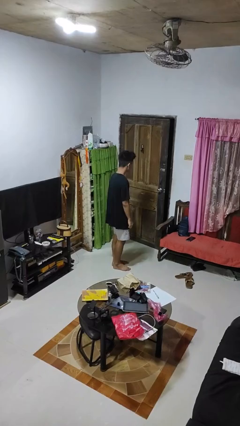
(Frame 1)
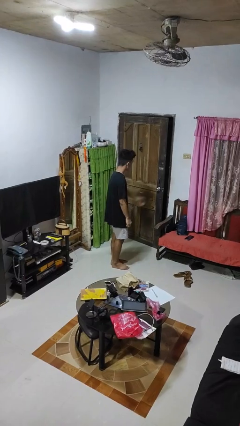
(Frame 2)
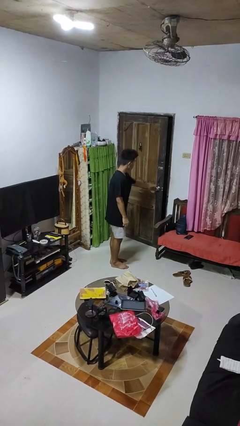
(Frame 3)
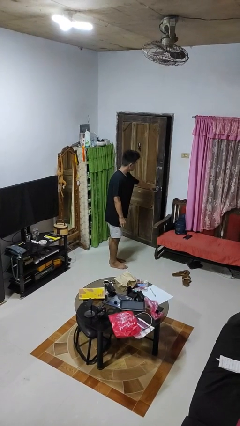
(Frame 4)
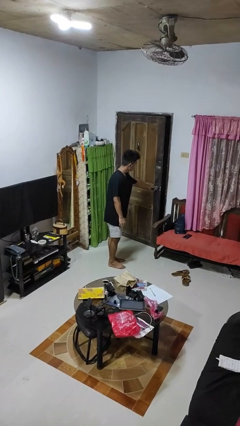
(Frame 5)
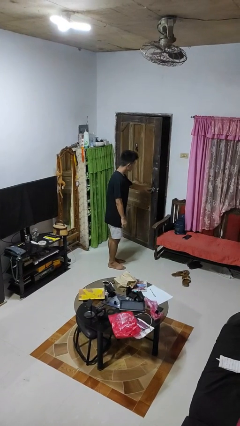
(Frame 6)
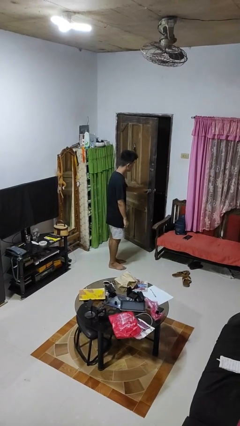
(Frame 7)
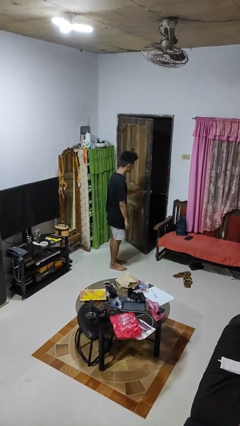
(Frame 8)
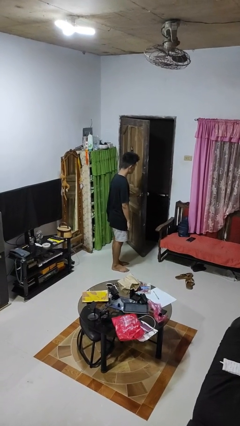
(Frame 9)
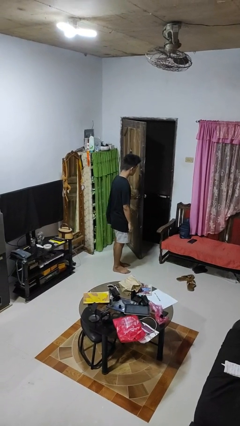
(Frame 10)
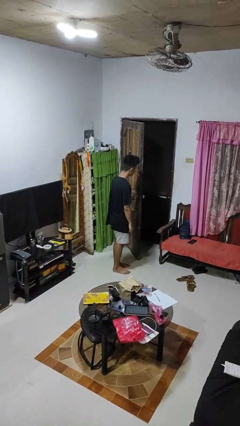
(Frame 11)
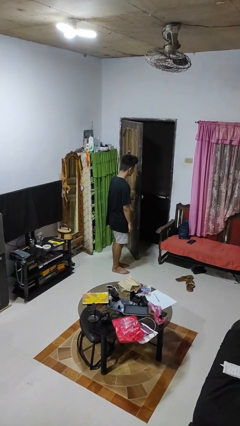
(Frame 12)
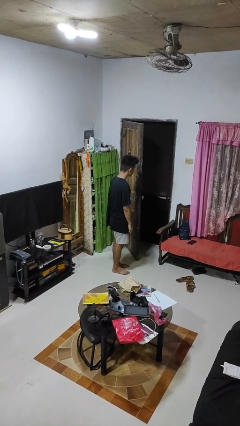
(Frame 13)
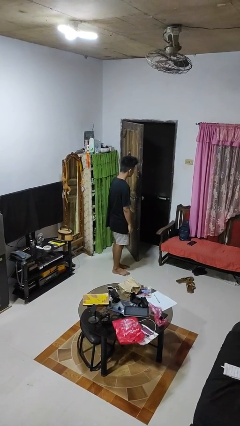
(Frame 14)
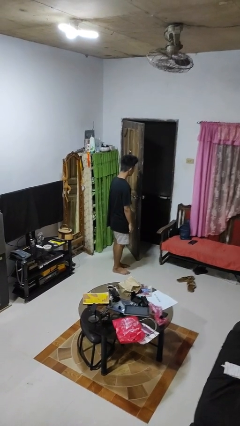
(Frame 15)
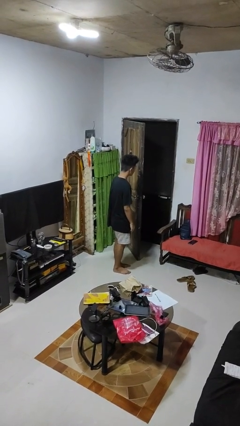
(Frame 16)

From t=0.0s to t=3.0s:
person opens facility door

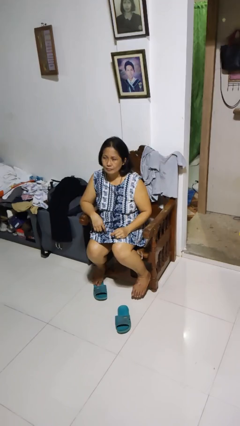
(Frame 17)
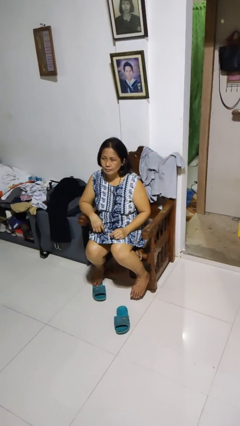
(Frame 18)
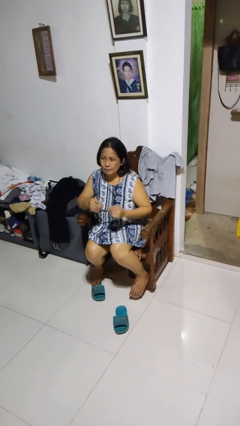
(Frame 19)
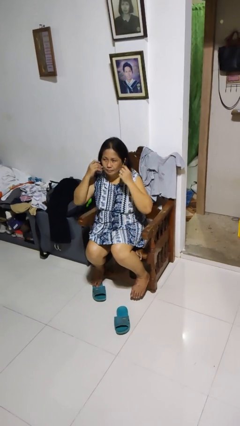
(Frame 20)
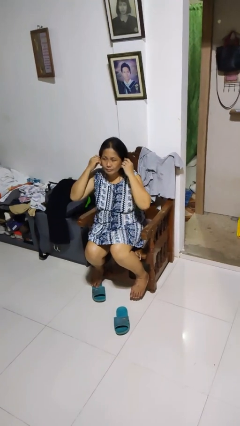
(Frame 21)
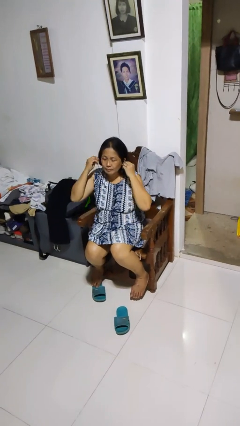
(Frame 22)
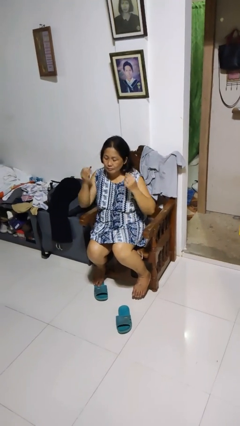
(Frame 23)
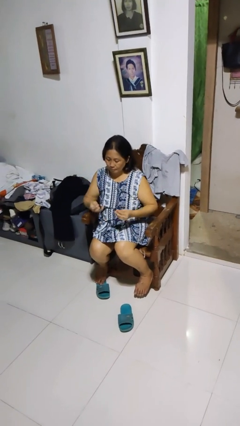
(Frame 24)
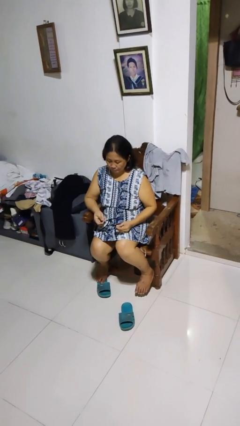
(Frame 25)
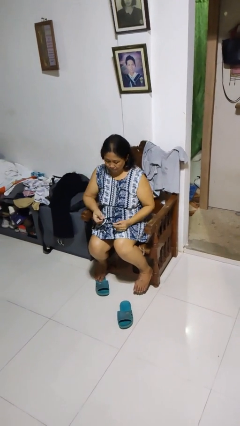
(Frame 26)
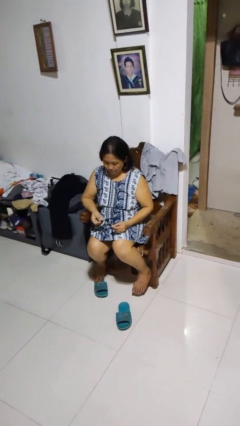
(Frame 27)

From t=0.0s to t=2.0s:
person takes off headphones

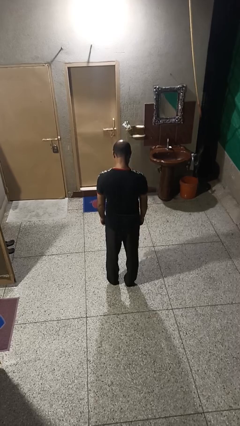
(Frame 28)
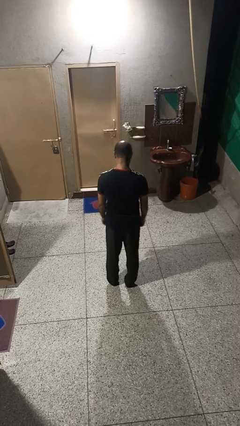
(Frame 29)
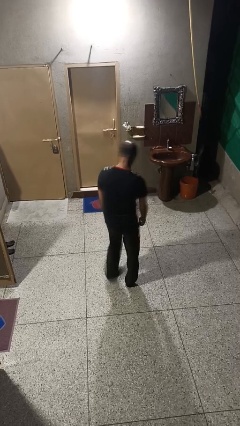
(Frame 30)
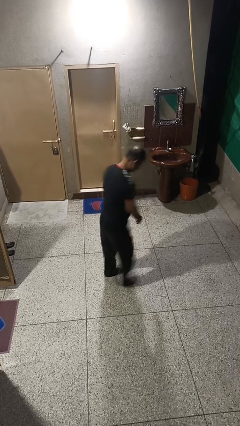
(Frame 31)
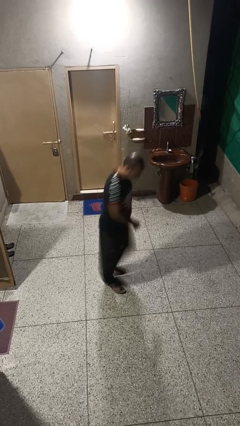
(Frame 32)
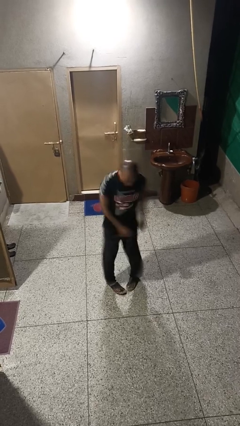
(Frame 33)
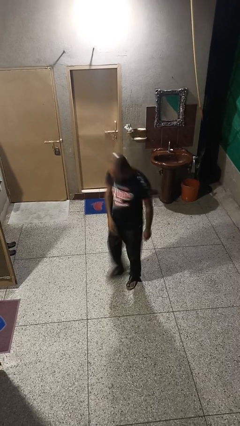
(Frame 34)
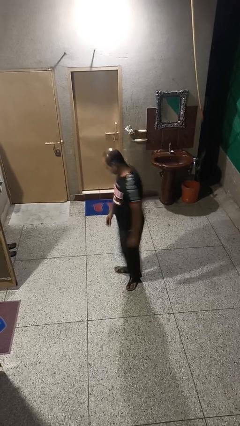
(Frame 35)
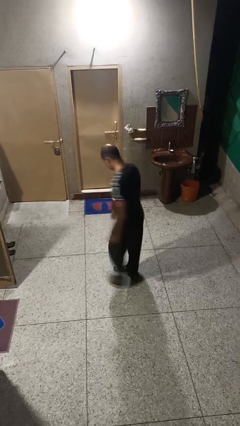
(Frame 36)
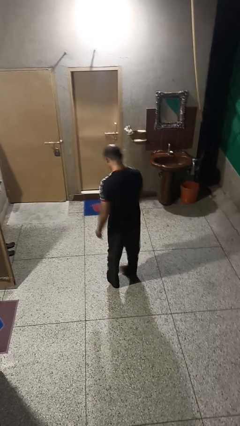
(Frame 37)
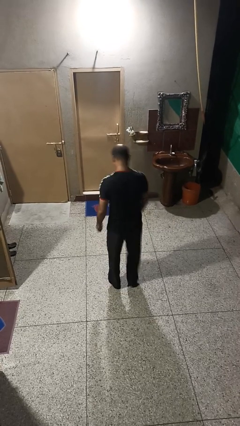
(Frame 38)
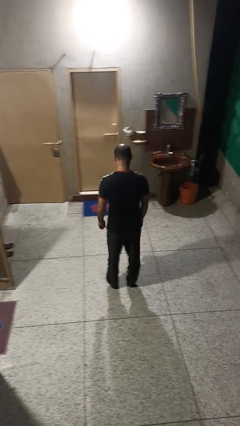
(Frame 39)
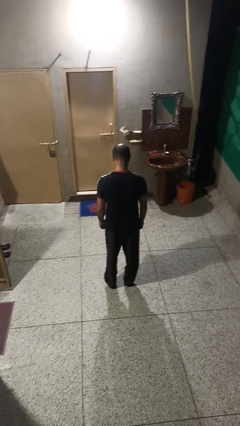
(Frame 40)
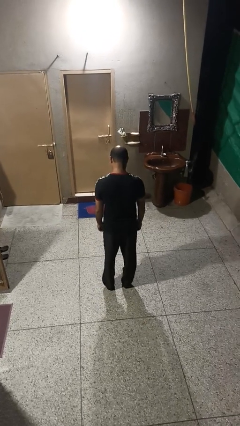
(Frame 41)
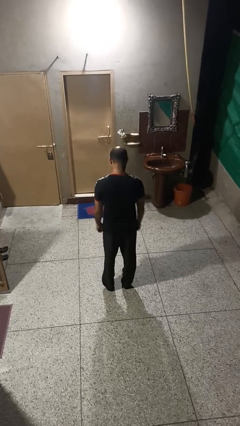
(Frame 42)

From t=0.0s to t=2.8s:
person twirls

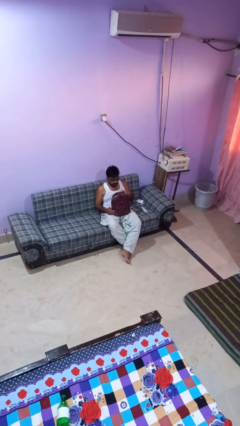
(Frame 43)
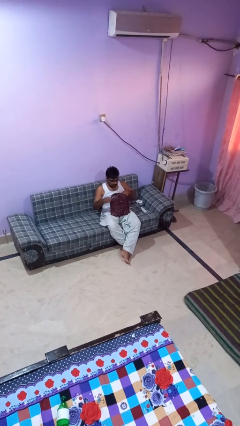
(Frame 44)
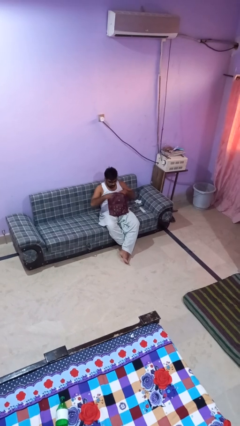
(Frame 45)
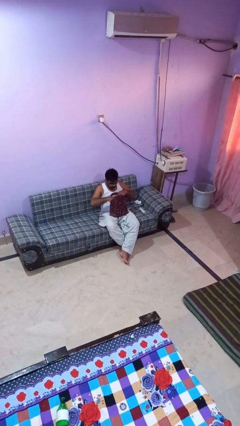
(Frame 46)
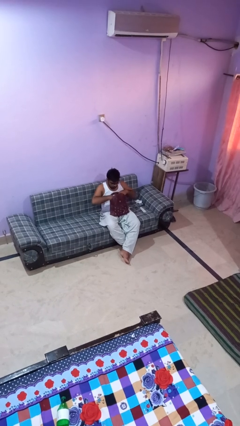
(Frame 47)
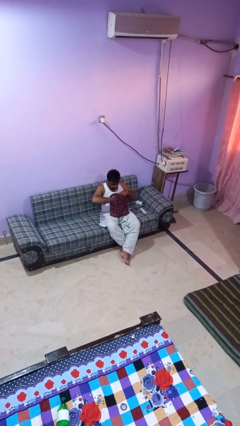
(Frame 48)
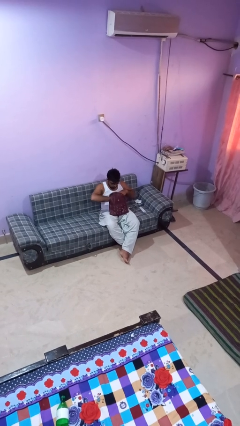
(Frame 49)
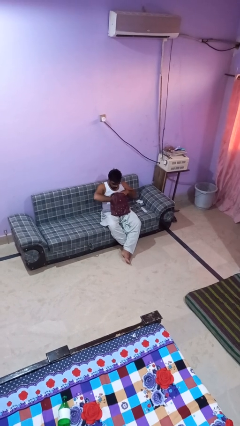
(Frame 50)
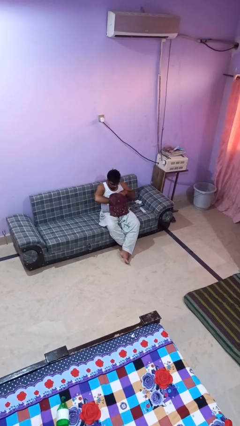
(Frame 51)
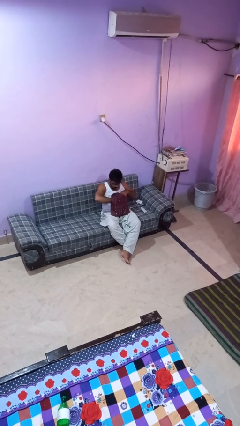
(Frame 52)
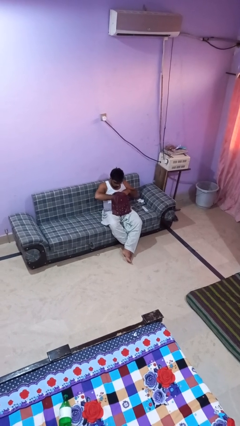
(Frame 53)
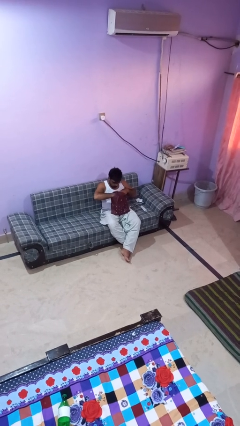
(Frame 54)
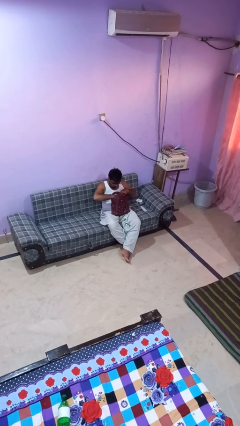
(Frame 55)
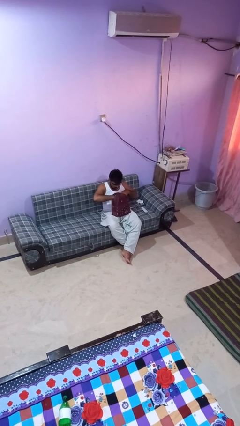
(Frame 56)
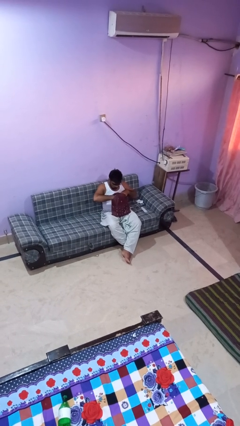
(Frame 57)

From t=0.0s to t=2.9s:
person searches in backpack

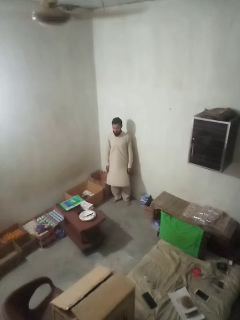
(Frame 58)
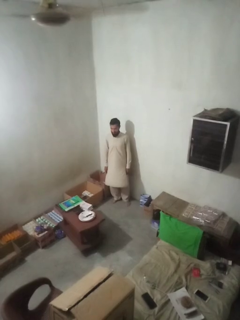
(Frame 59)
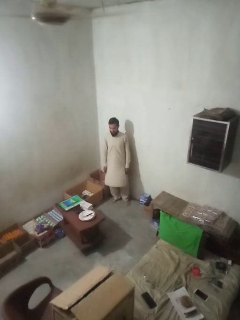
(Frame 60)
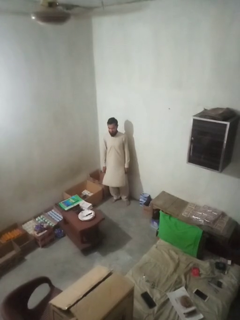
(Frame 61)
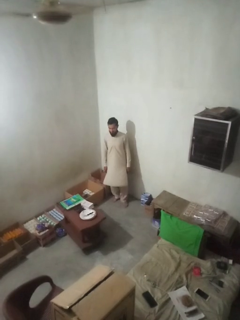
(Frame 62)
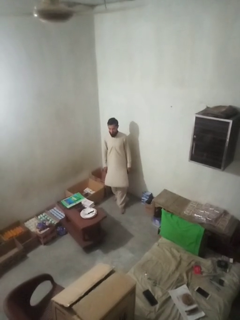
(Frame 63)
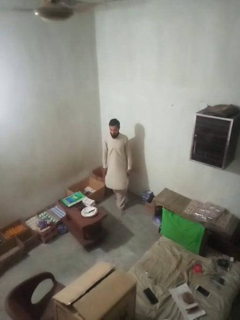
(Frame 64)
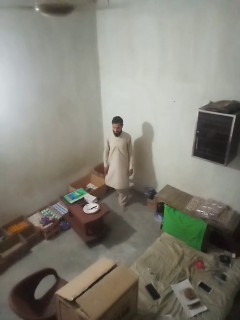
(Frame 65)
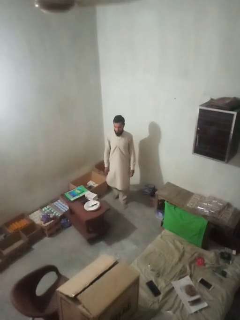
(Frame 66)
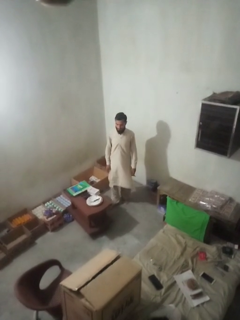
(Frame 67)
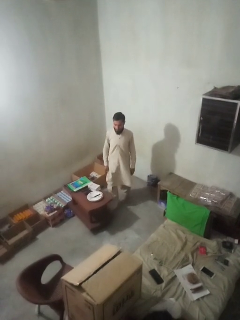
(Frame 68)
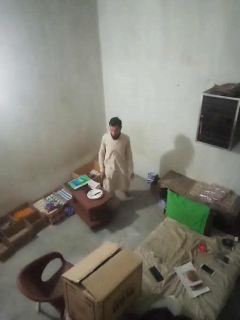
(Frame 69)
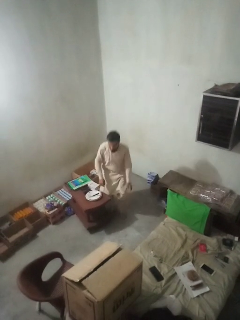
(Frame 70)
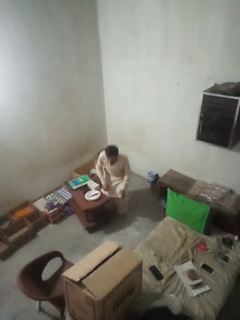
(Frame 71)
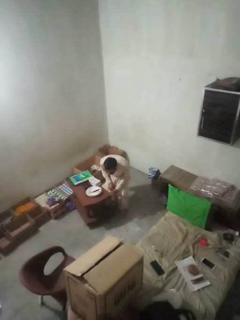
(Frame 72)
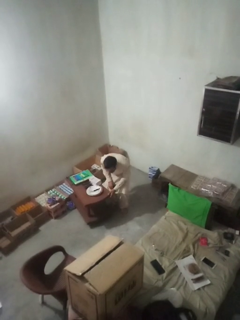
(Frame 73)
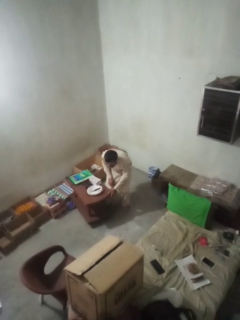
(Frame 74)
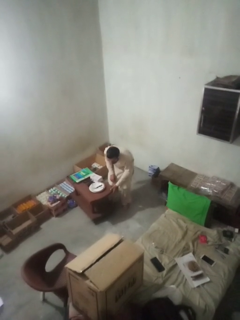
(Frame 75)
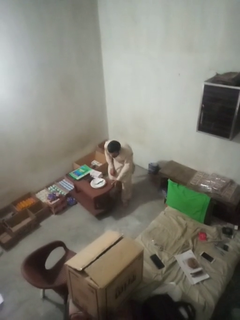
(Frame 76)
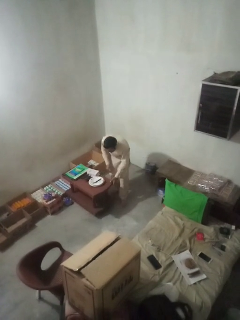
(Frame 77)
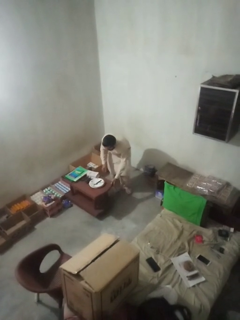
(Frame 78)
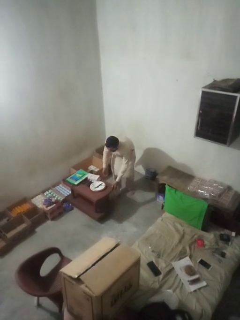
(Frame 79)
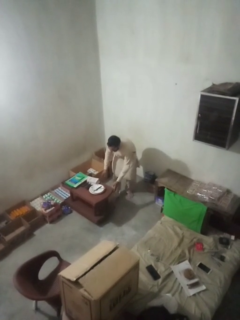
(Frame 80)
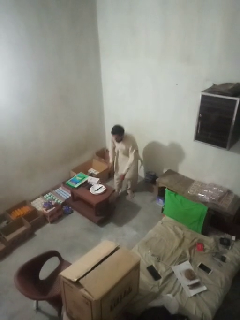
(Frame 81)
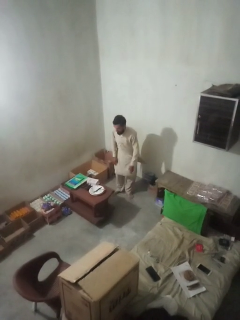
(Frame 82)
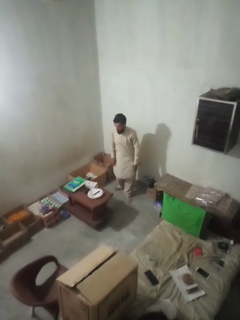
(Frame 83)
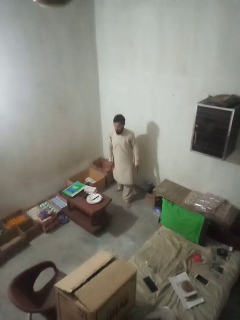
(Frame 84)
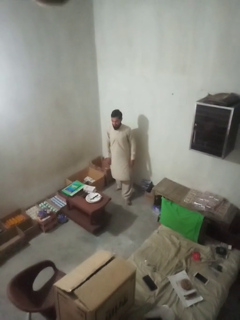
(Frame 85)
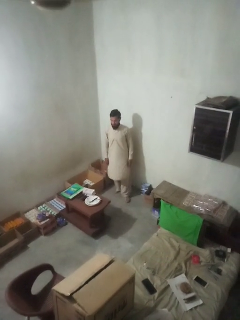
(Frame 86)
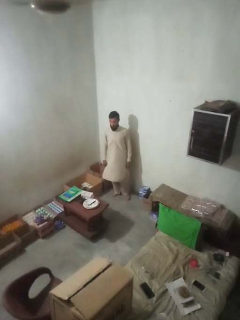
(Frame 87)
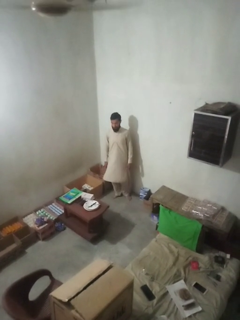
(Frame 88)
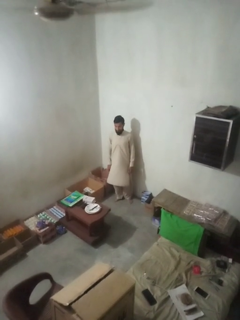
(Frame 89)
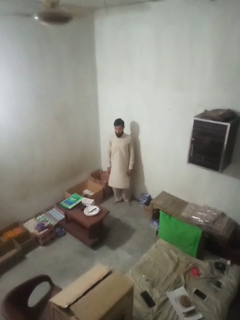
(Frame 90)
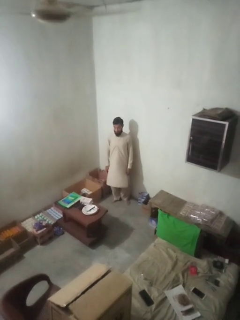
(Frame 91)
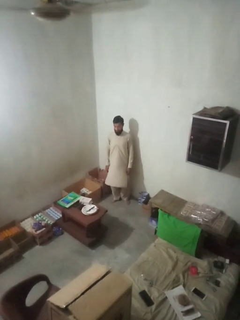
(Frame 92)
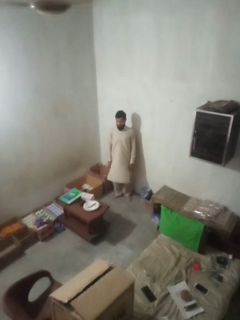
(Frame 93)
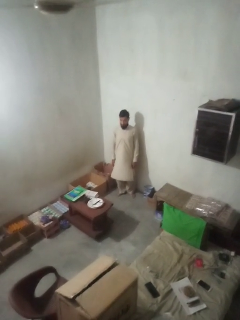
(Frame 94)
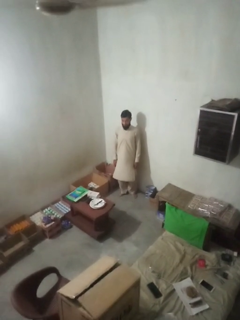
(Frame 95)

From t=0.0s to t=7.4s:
person bumps into table

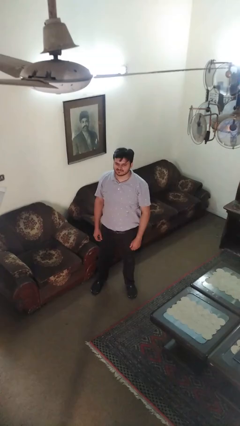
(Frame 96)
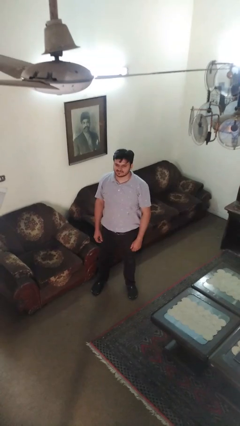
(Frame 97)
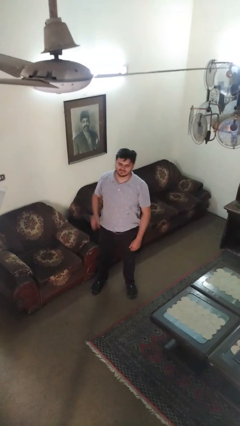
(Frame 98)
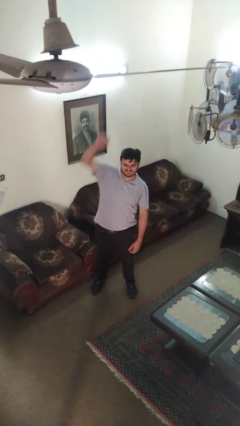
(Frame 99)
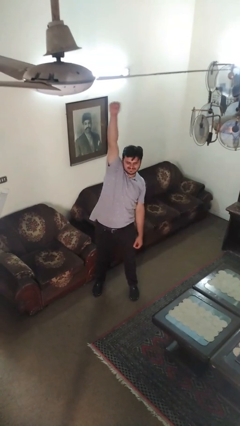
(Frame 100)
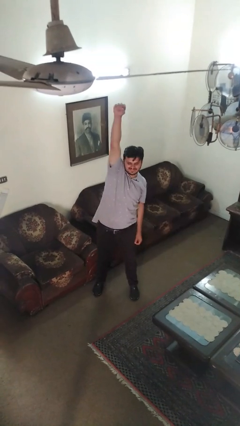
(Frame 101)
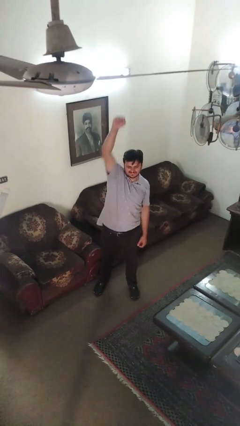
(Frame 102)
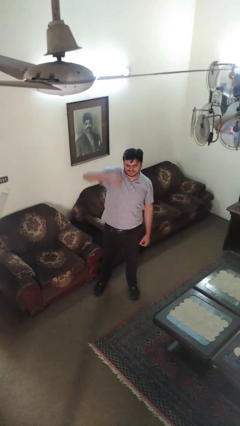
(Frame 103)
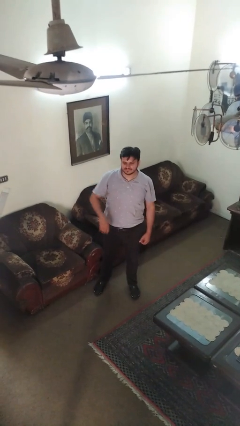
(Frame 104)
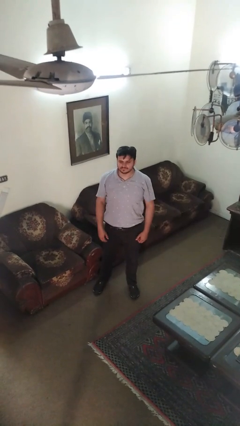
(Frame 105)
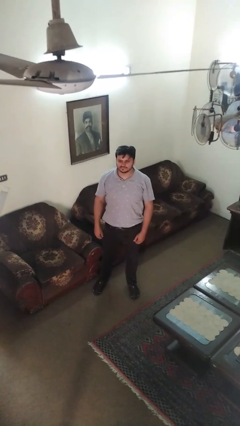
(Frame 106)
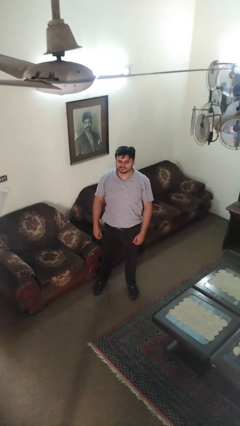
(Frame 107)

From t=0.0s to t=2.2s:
person punches
